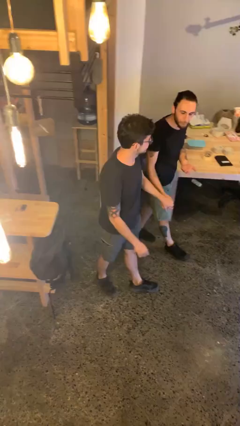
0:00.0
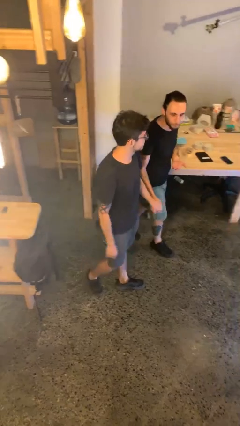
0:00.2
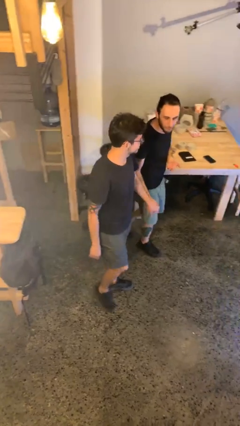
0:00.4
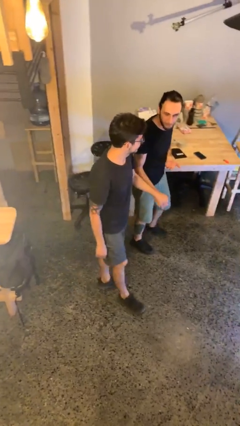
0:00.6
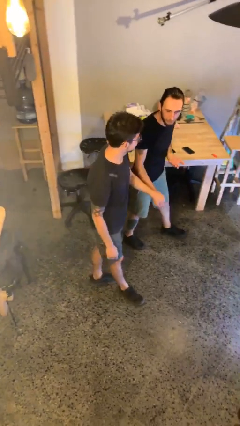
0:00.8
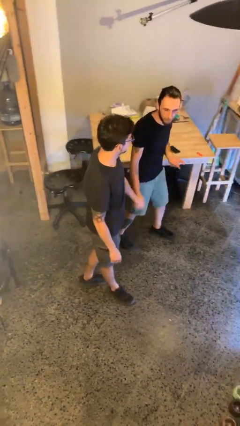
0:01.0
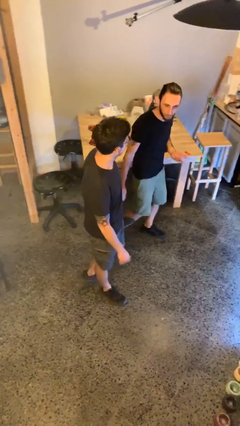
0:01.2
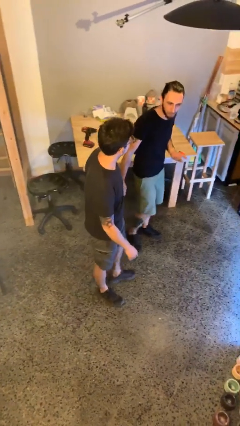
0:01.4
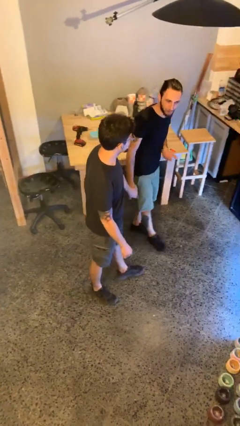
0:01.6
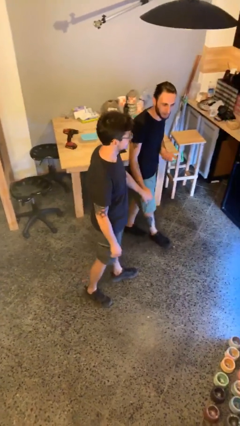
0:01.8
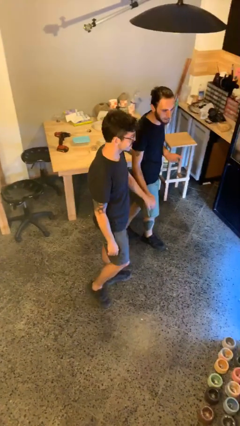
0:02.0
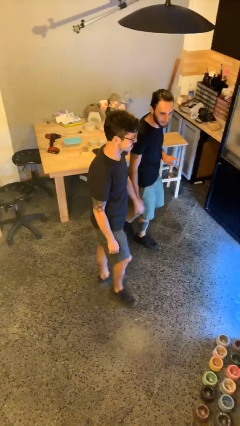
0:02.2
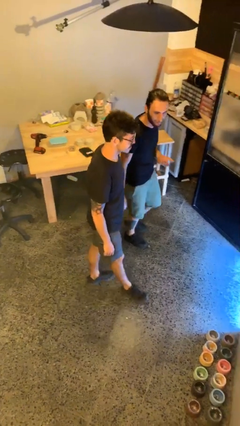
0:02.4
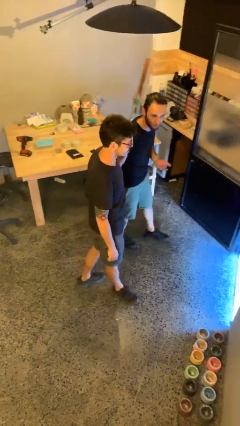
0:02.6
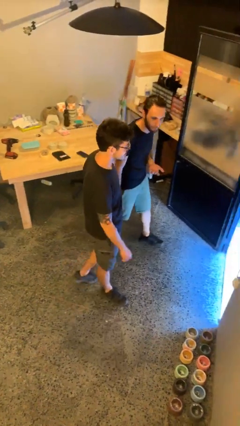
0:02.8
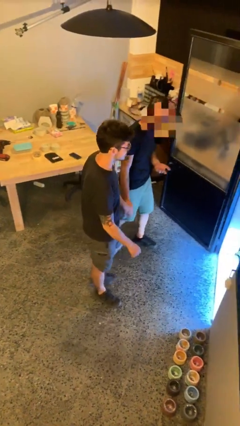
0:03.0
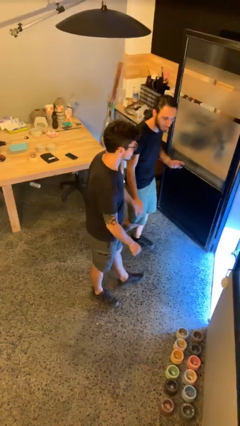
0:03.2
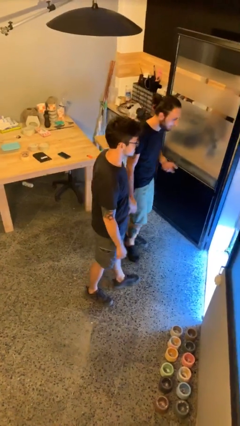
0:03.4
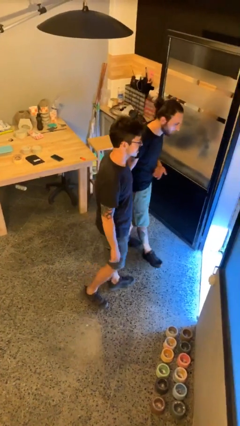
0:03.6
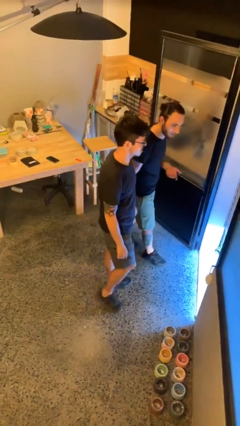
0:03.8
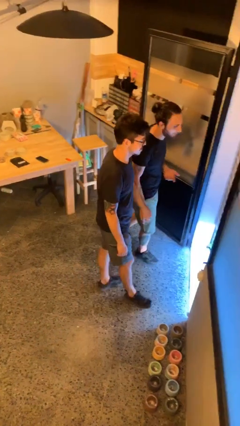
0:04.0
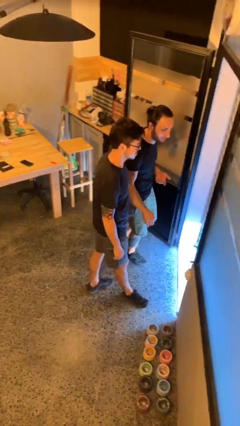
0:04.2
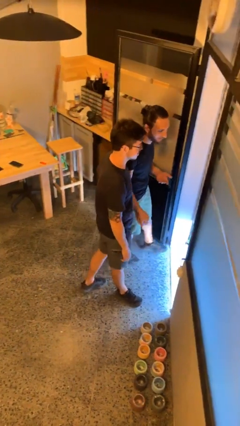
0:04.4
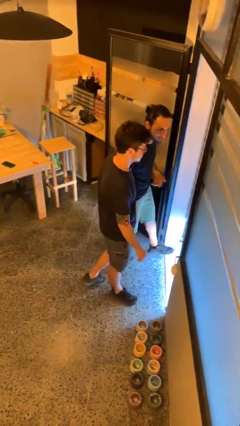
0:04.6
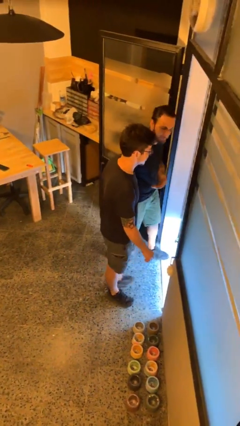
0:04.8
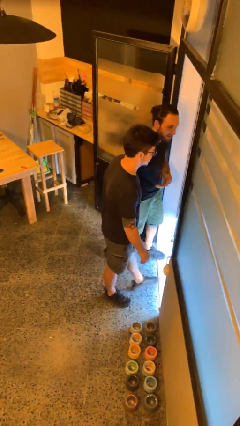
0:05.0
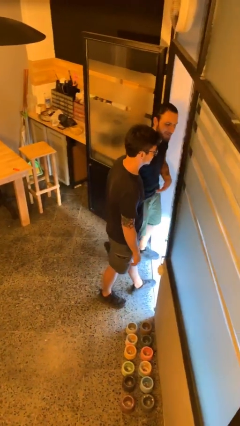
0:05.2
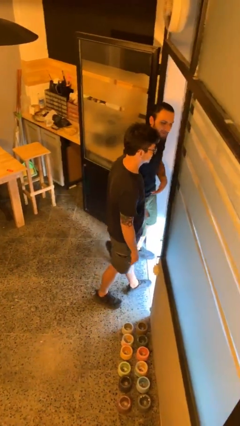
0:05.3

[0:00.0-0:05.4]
person holds hand

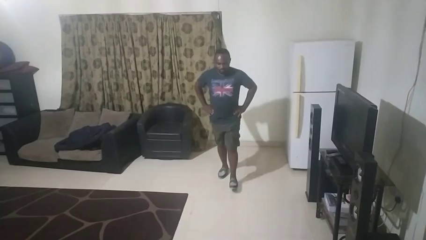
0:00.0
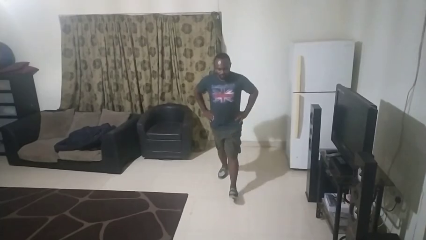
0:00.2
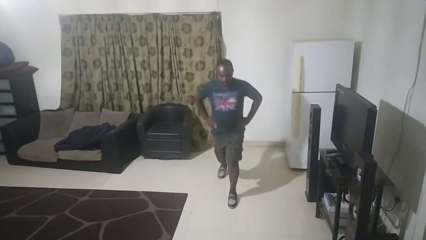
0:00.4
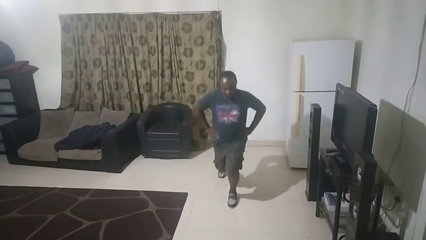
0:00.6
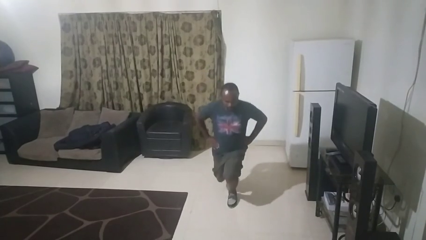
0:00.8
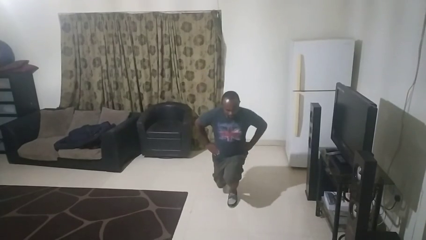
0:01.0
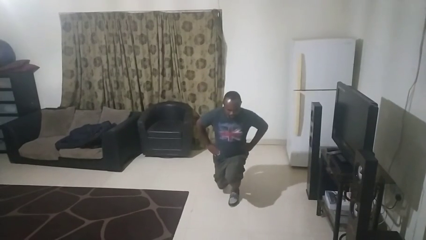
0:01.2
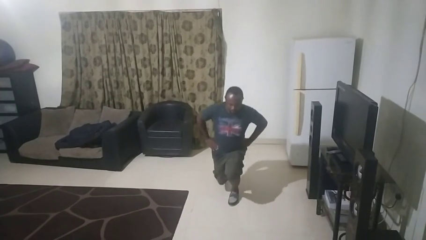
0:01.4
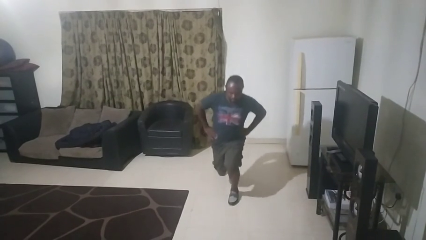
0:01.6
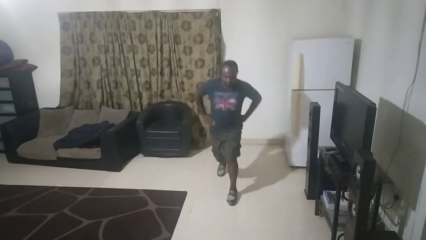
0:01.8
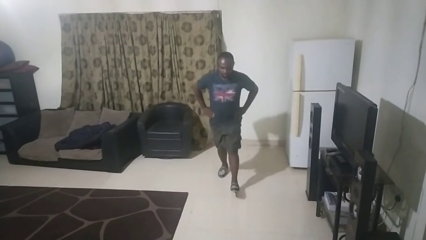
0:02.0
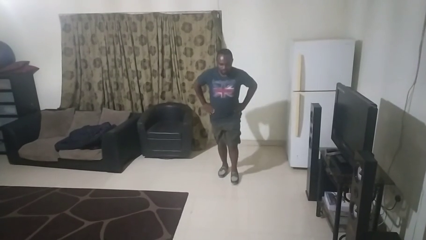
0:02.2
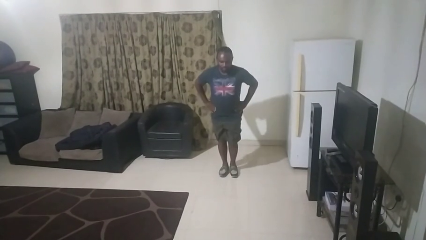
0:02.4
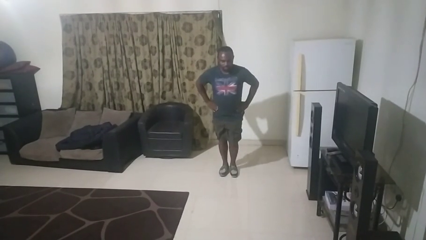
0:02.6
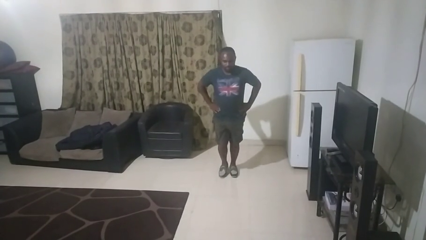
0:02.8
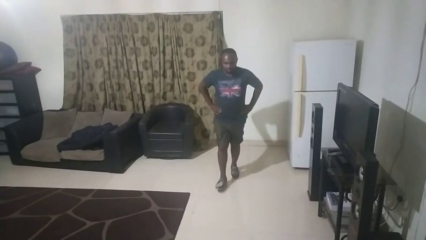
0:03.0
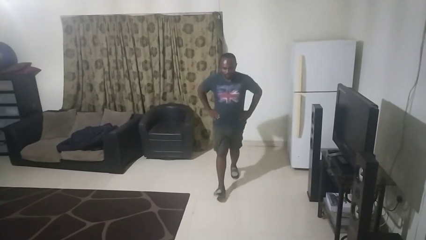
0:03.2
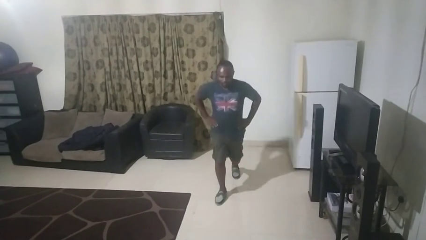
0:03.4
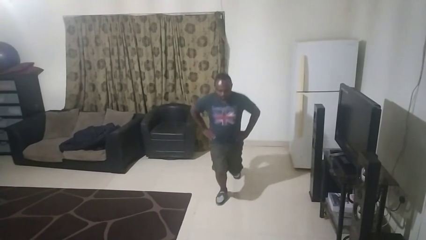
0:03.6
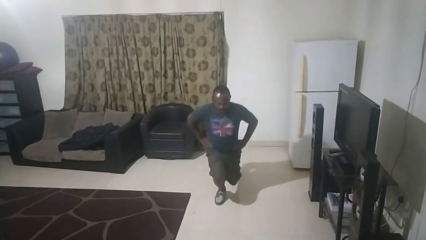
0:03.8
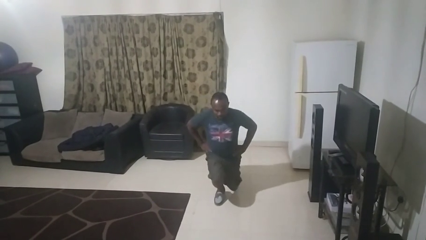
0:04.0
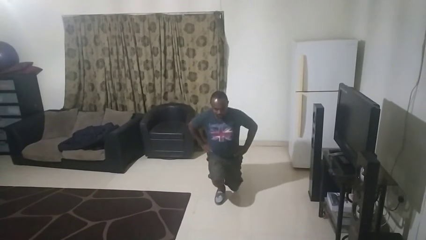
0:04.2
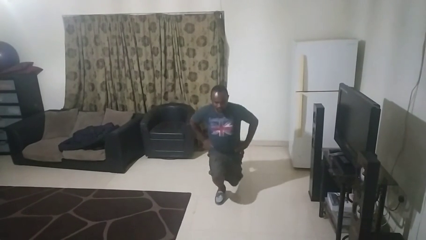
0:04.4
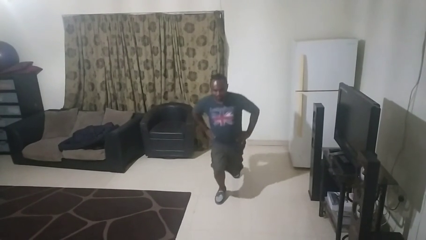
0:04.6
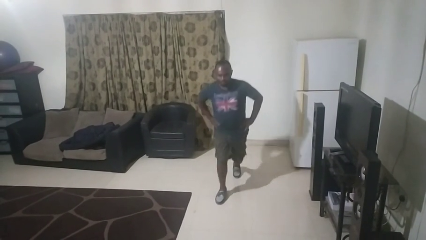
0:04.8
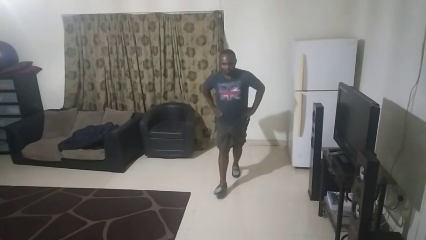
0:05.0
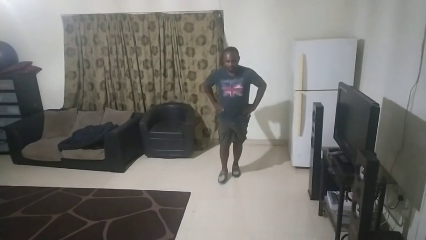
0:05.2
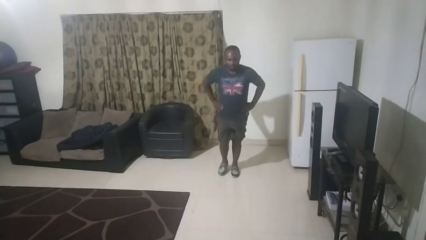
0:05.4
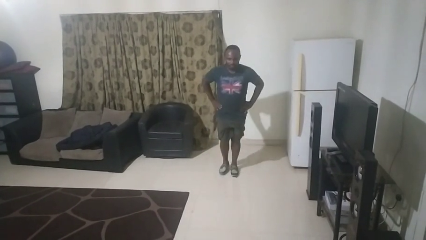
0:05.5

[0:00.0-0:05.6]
person exercises with lunges

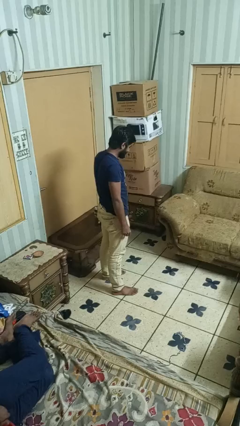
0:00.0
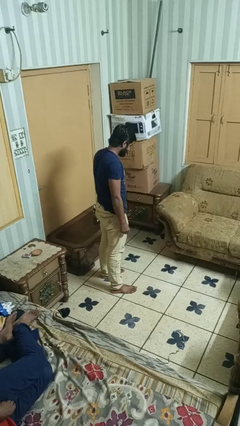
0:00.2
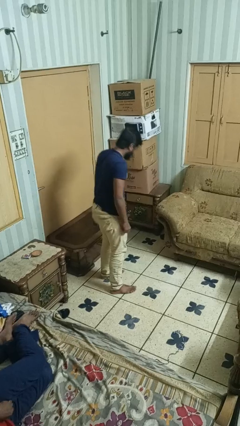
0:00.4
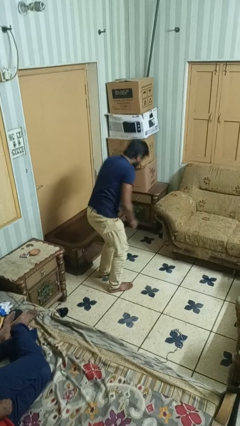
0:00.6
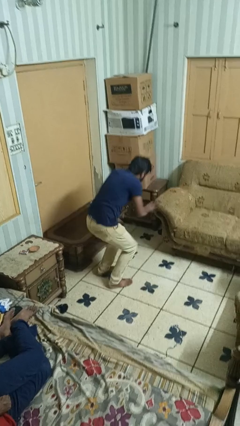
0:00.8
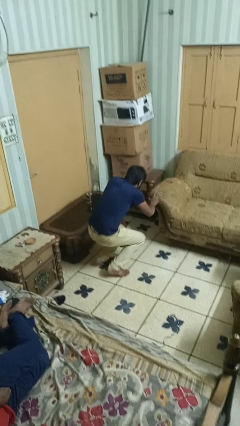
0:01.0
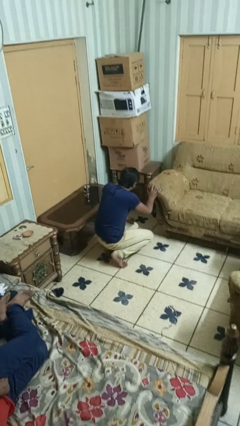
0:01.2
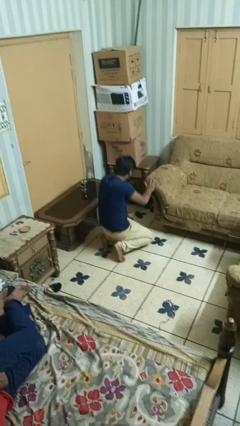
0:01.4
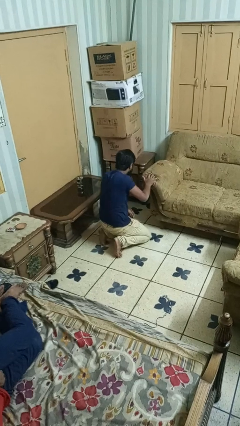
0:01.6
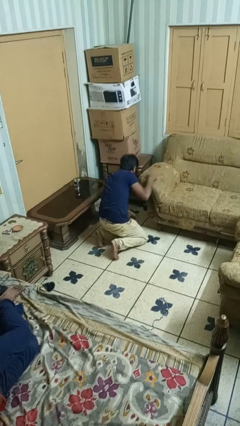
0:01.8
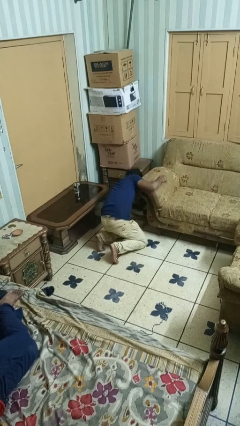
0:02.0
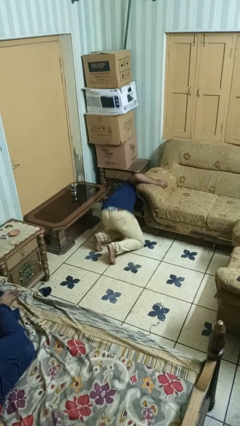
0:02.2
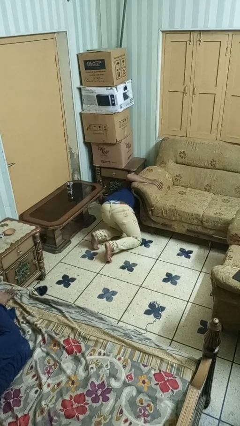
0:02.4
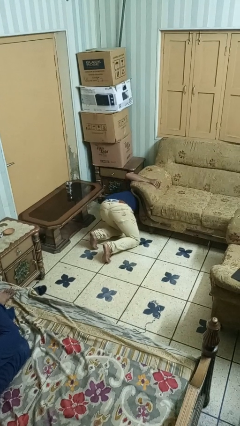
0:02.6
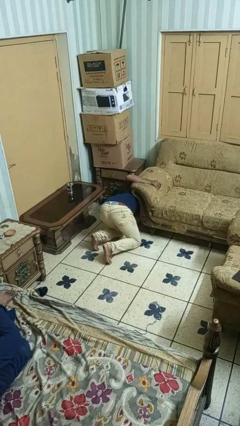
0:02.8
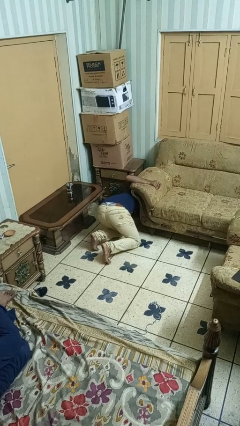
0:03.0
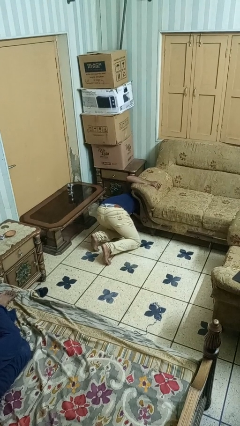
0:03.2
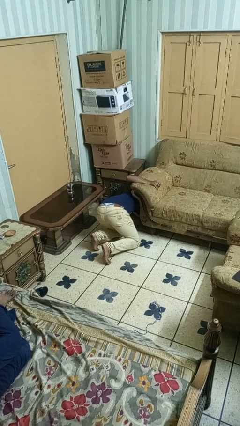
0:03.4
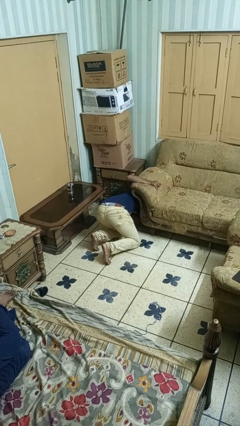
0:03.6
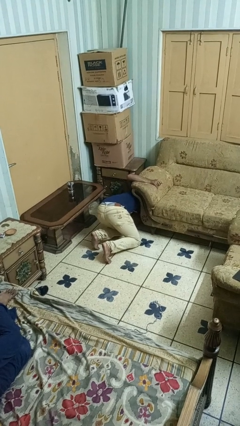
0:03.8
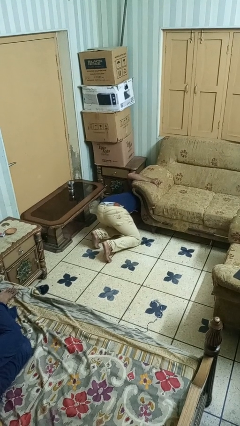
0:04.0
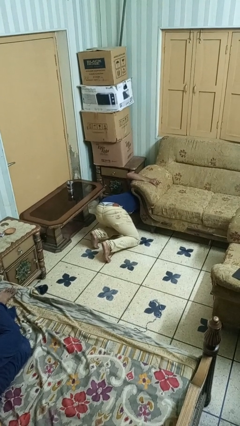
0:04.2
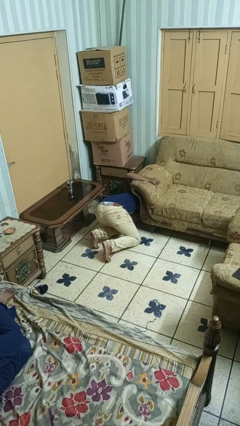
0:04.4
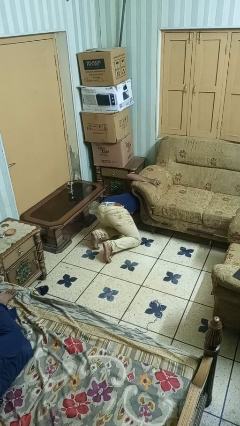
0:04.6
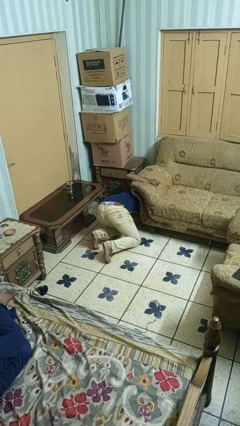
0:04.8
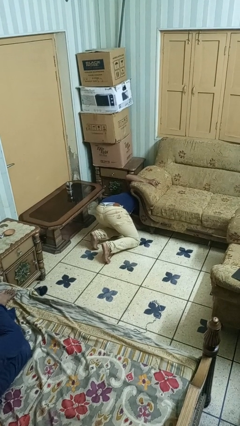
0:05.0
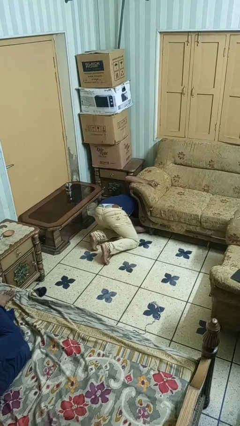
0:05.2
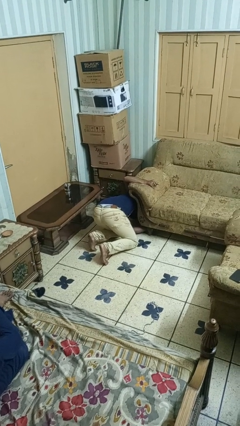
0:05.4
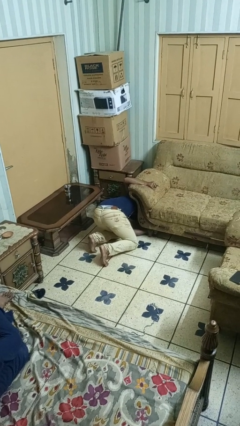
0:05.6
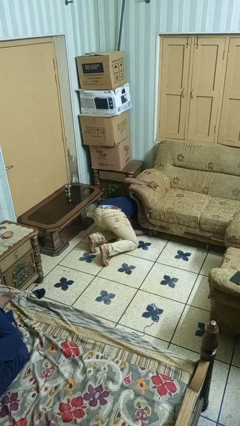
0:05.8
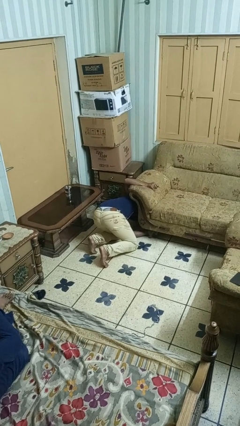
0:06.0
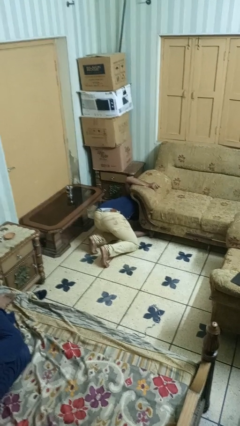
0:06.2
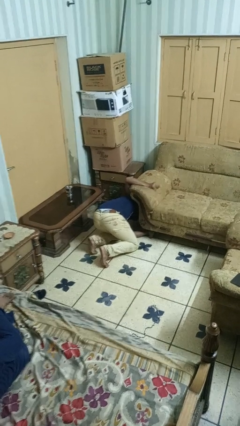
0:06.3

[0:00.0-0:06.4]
person searches under couch

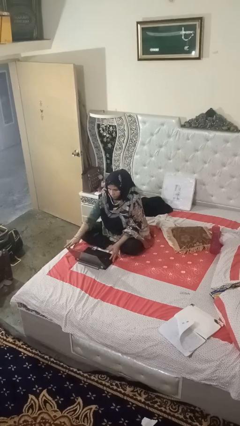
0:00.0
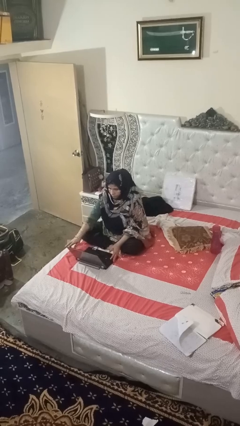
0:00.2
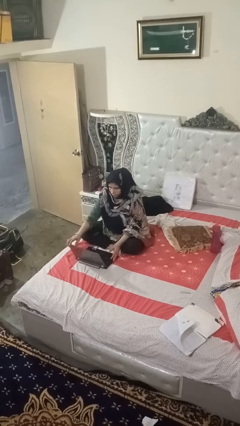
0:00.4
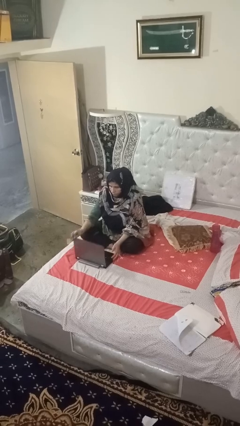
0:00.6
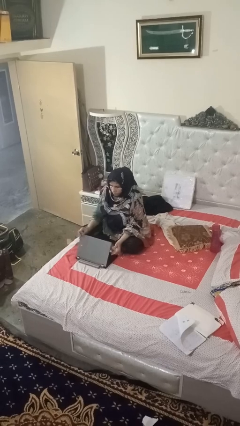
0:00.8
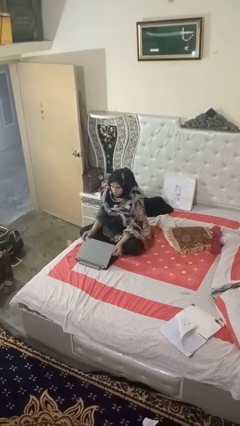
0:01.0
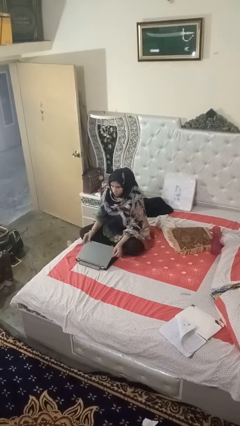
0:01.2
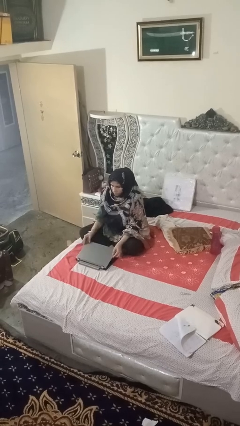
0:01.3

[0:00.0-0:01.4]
person closes laptop
